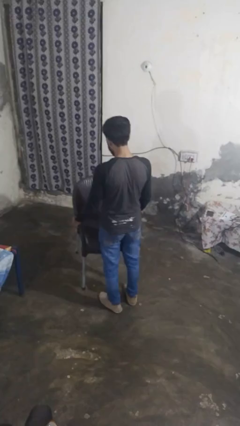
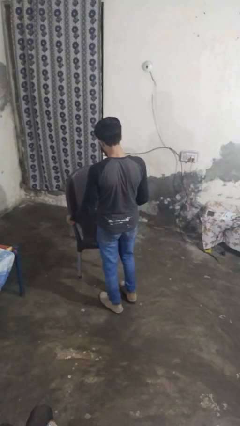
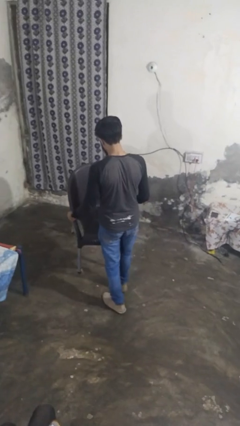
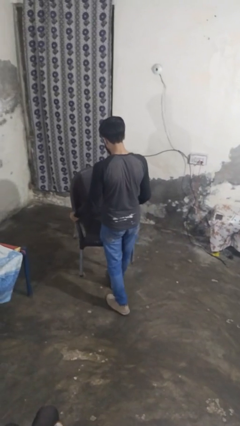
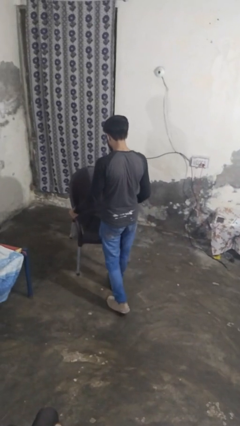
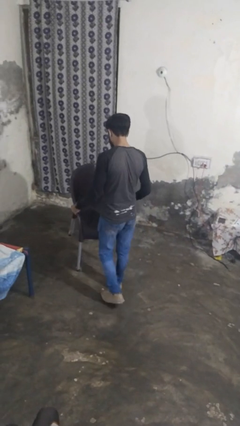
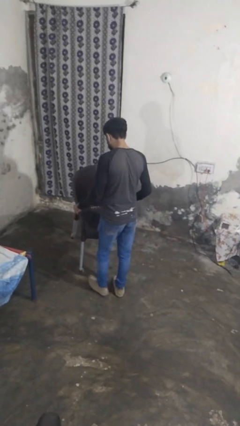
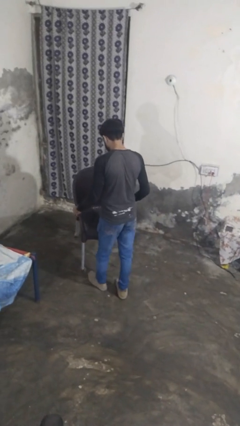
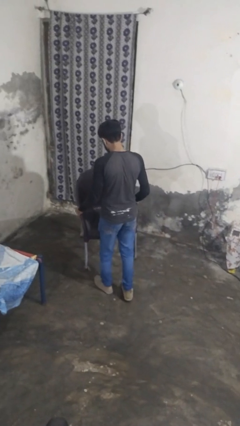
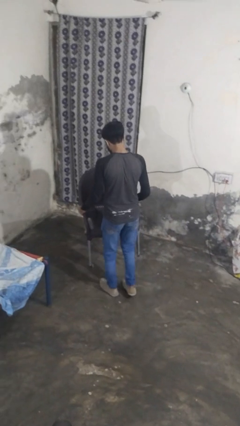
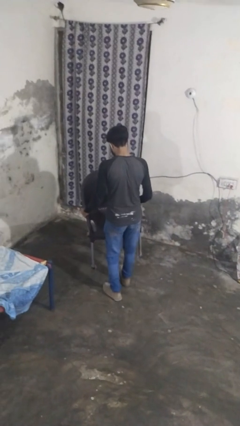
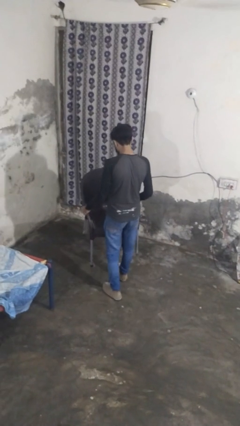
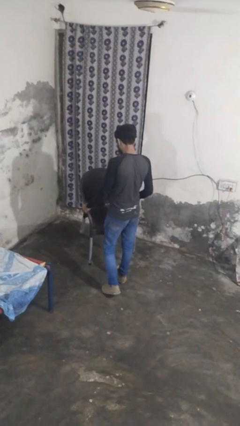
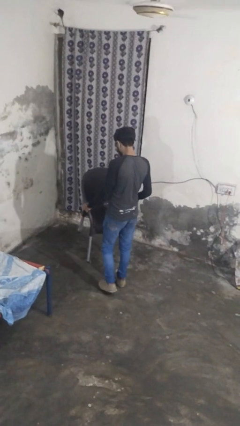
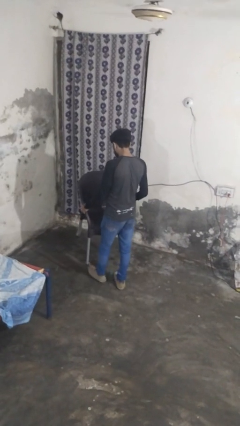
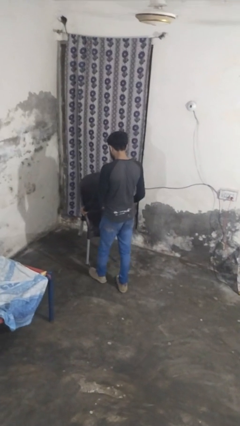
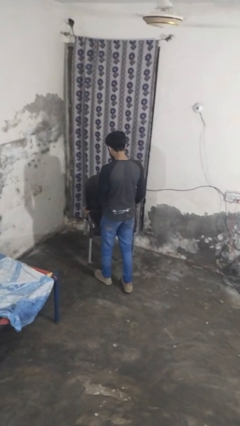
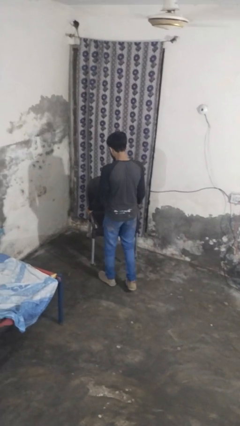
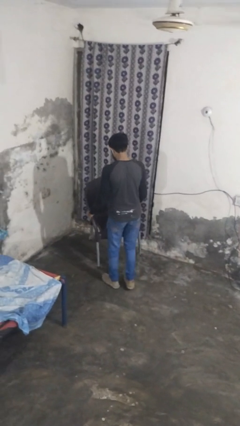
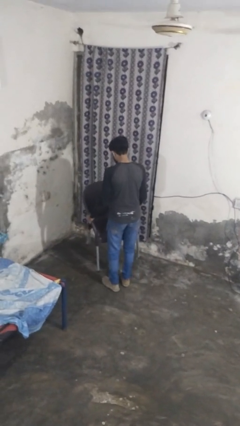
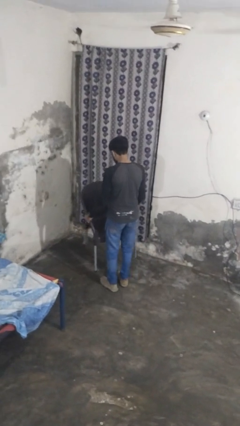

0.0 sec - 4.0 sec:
person carries furniture

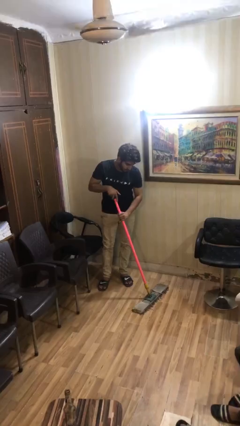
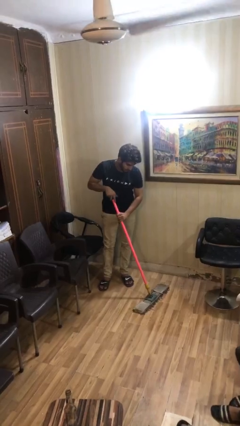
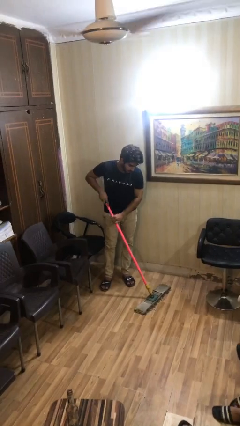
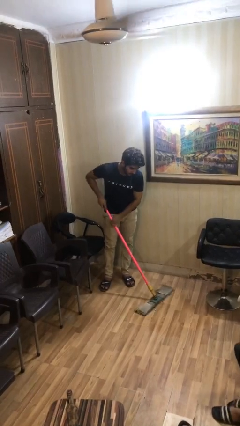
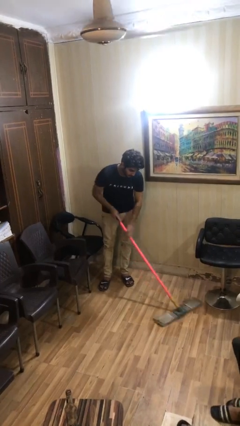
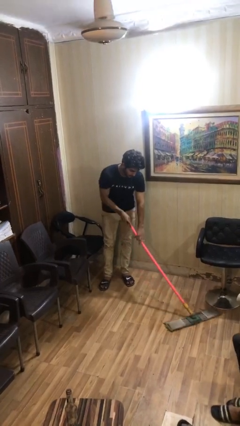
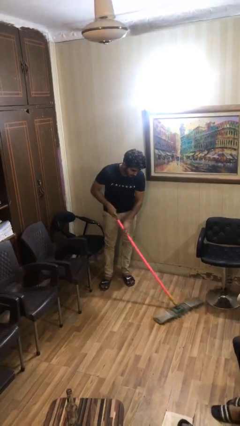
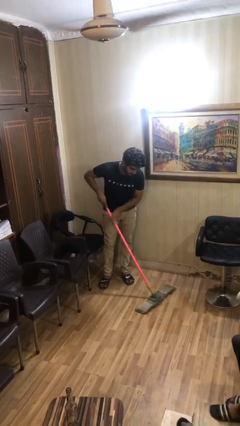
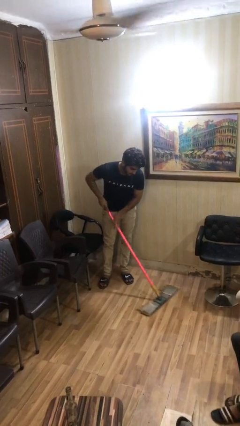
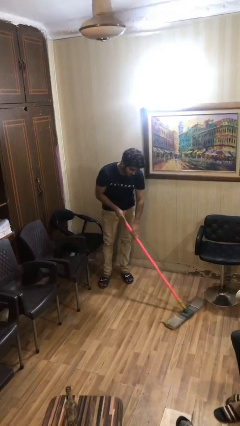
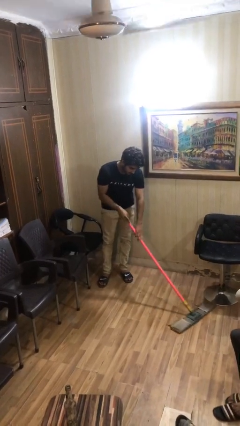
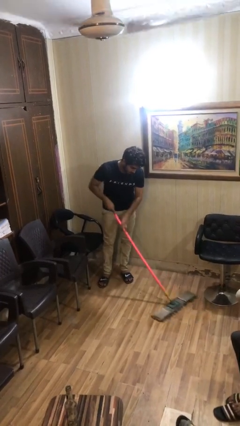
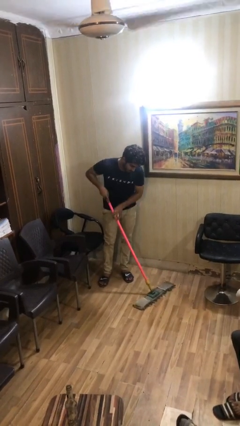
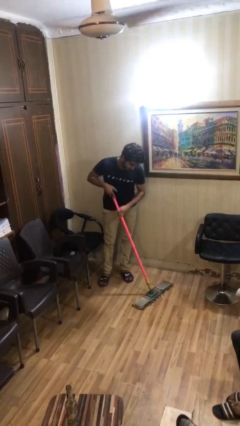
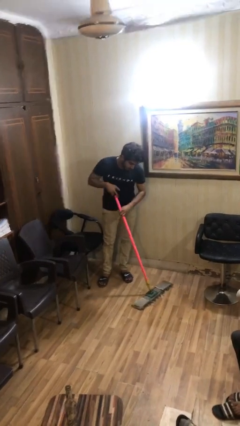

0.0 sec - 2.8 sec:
person sweeps floor

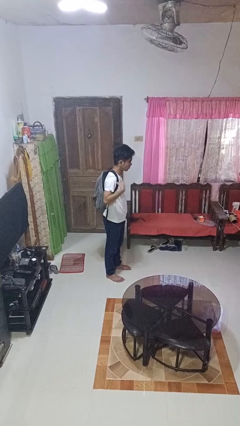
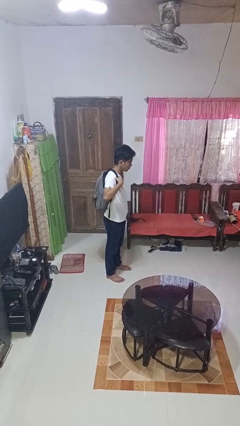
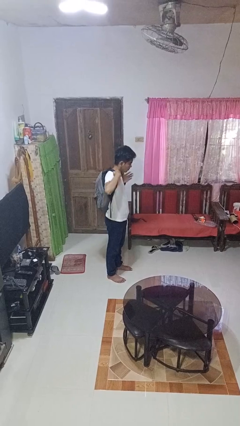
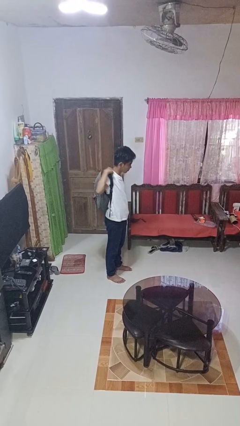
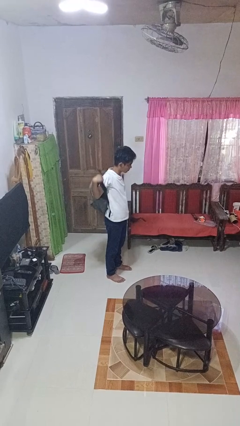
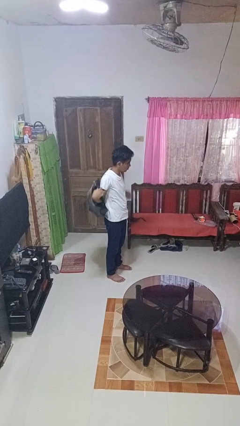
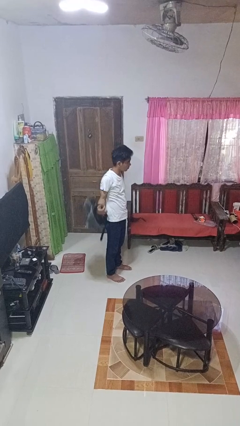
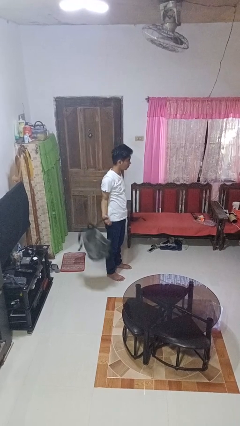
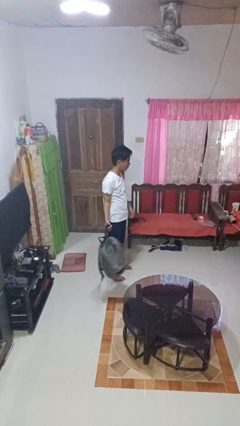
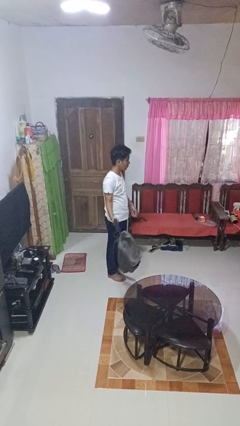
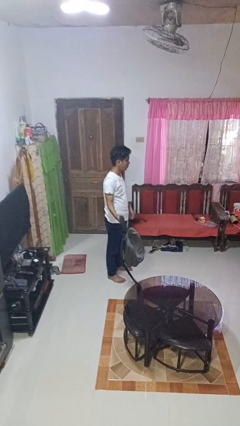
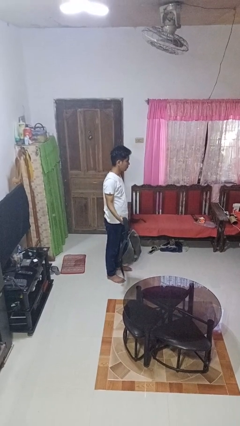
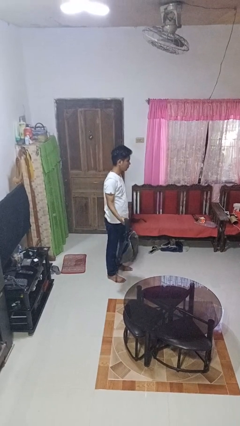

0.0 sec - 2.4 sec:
person takes off backpack

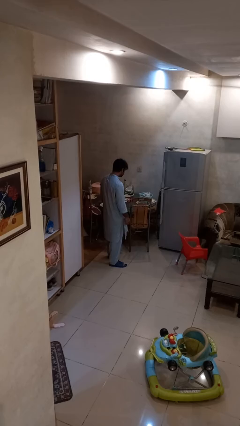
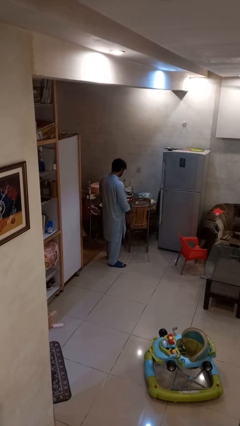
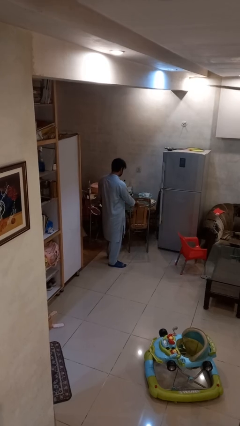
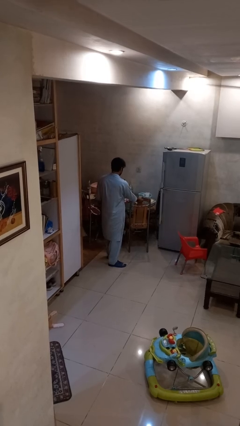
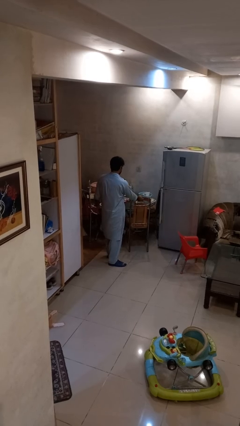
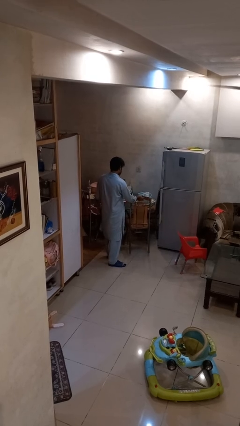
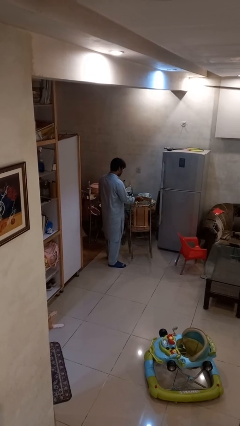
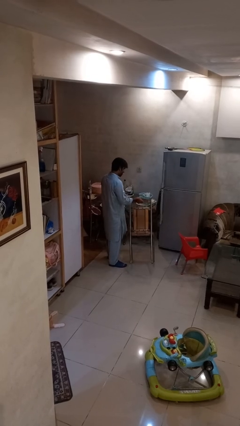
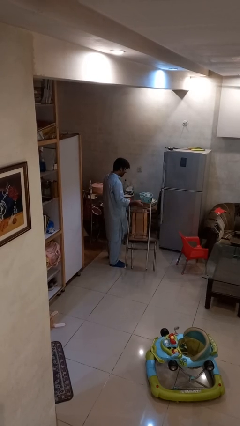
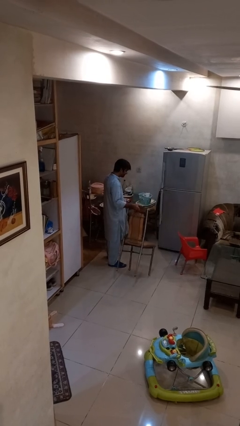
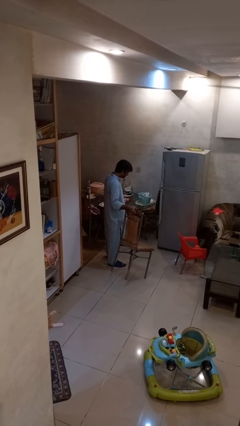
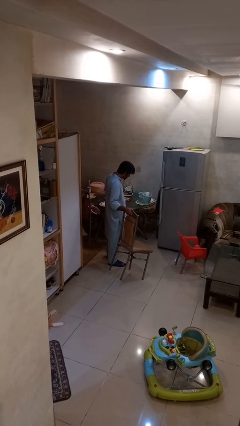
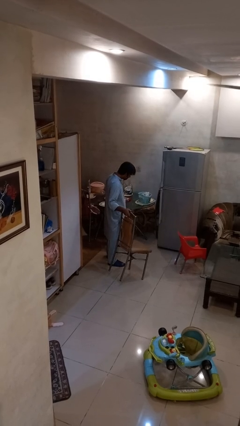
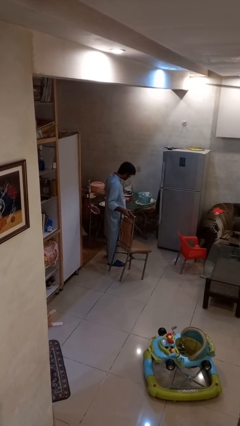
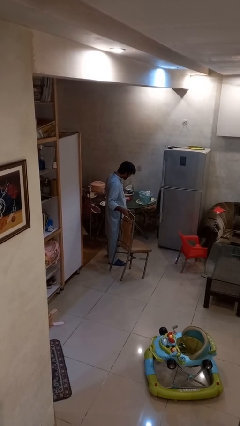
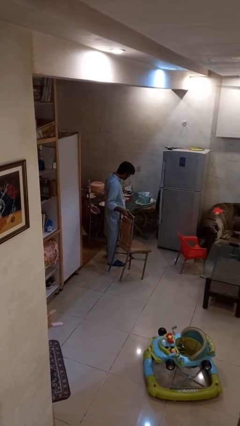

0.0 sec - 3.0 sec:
person pulls out chair

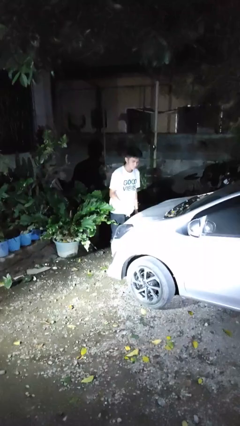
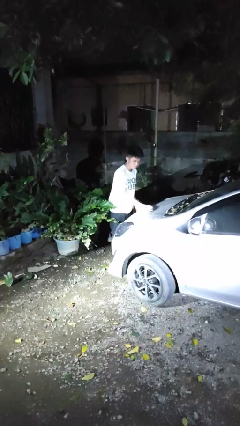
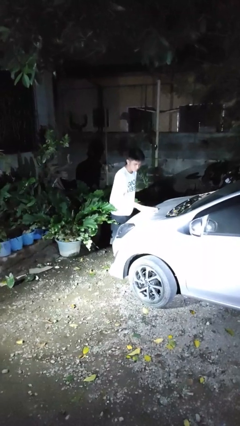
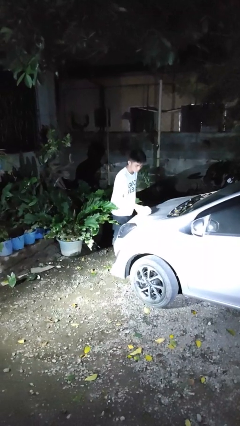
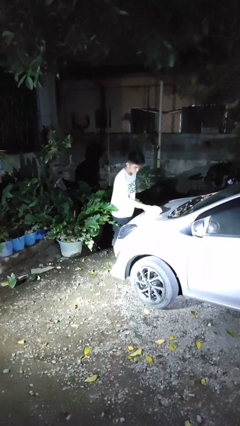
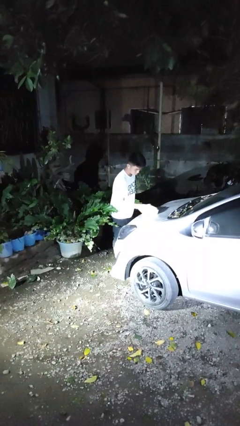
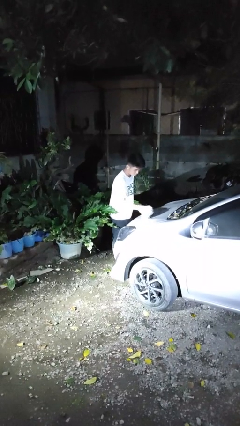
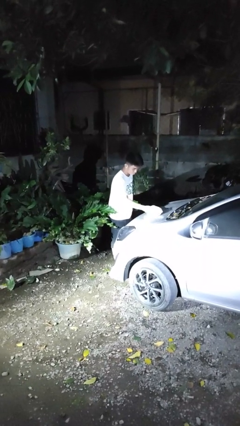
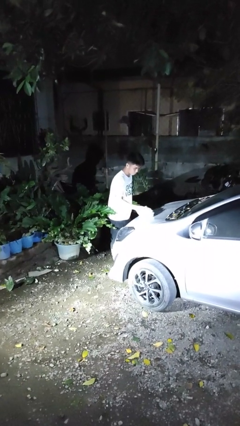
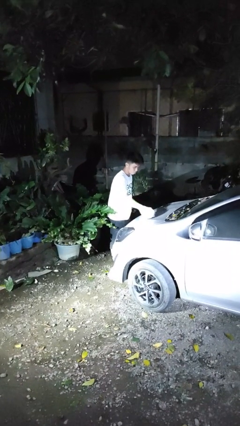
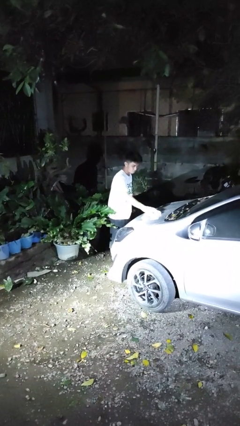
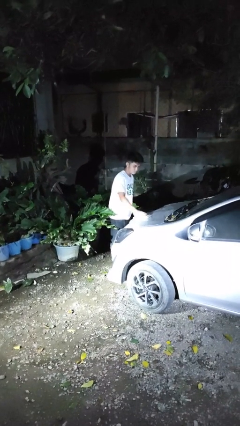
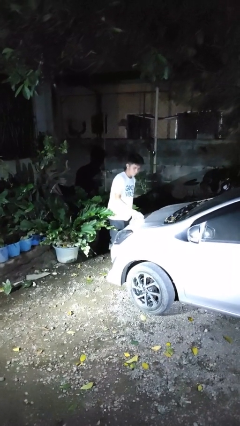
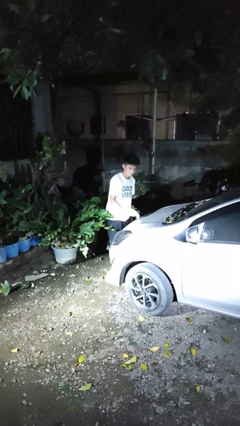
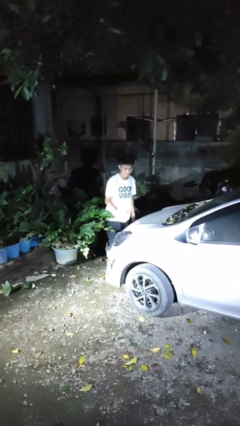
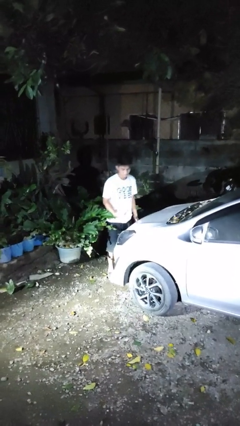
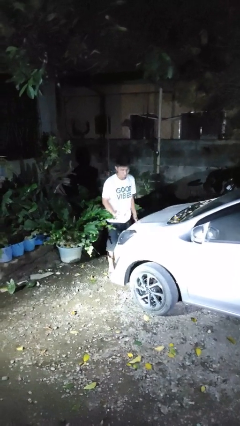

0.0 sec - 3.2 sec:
person polishes car with rag

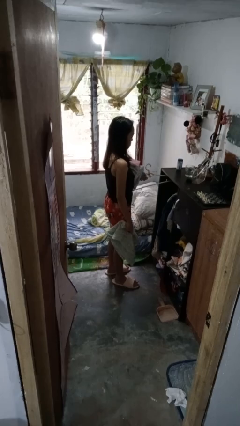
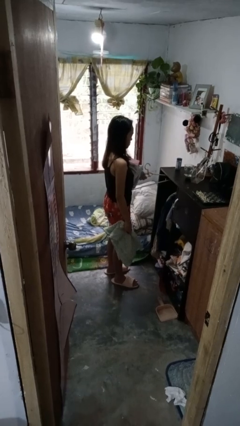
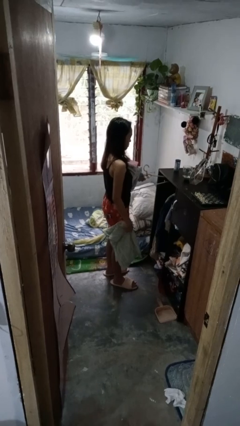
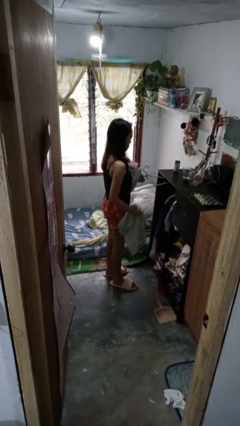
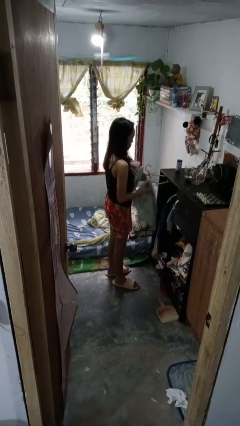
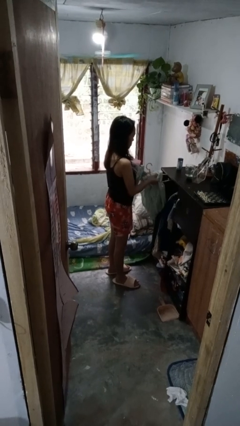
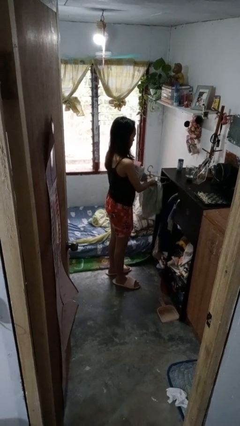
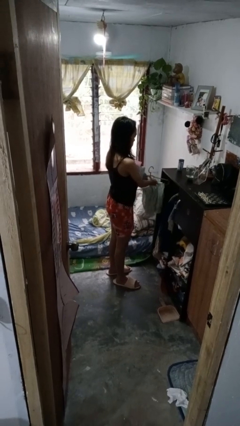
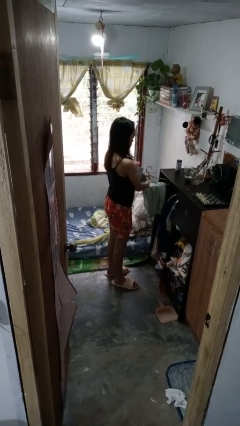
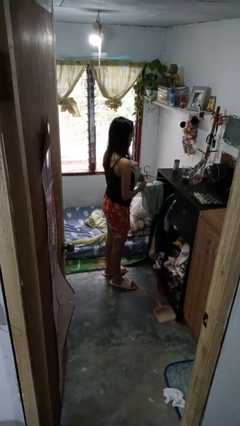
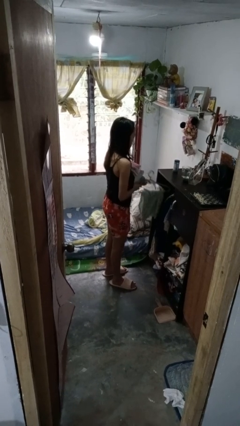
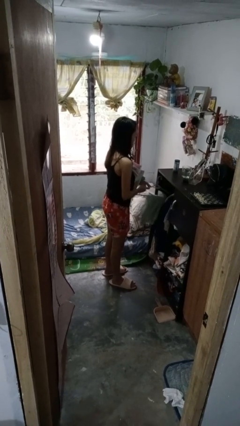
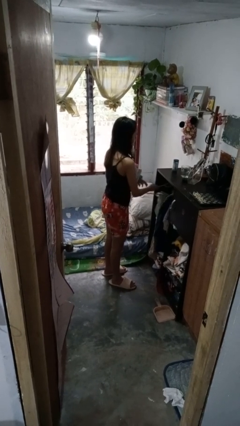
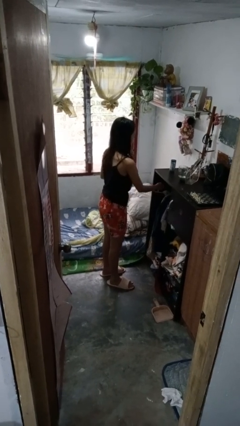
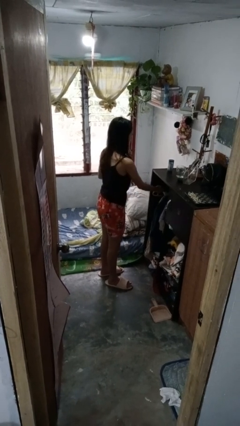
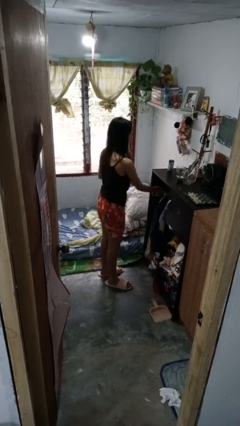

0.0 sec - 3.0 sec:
person puts clothes into closet
